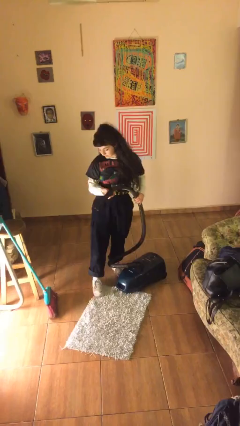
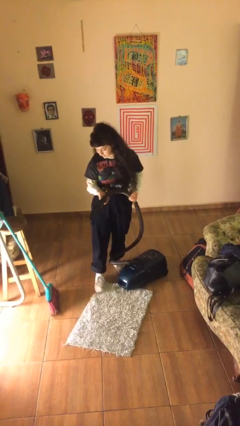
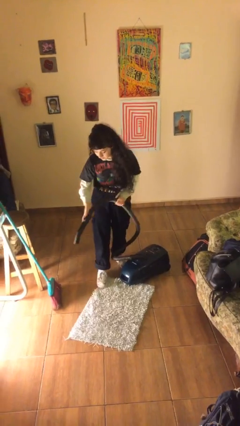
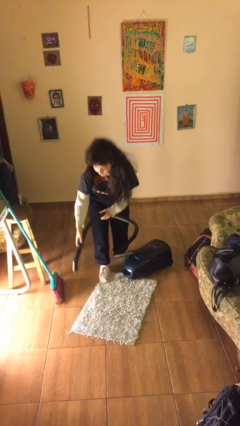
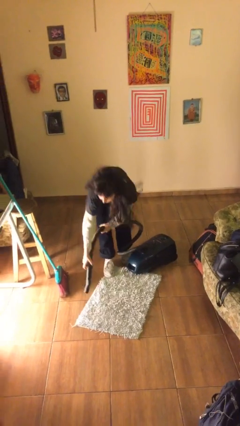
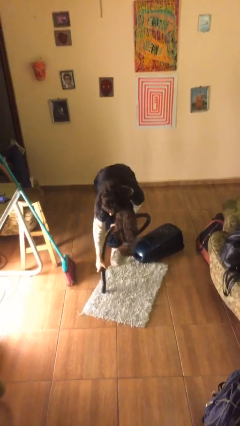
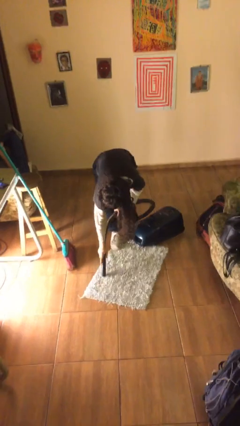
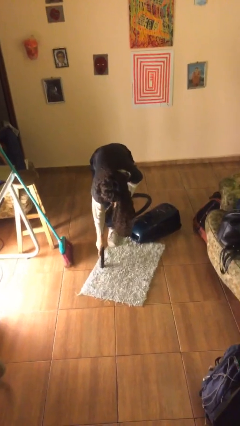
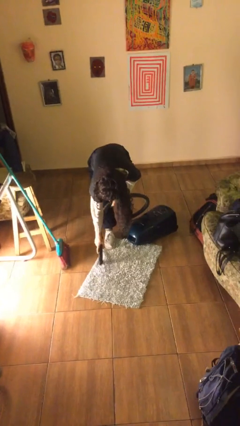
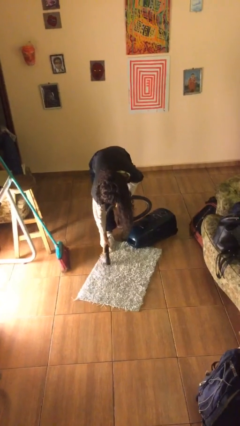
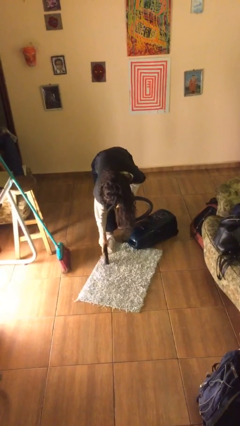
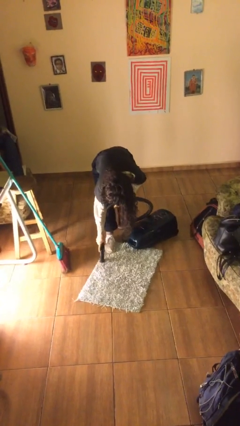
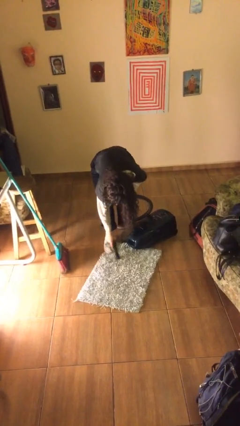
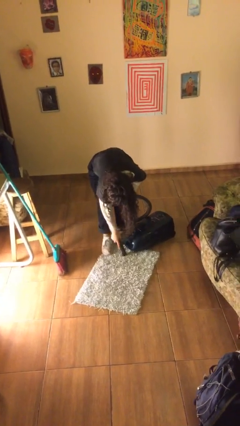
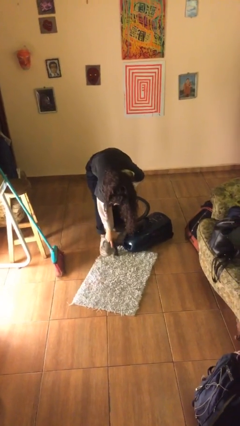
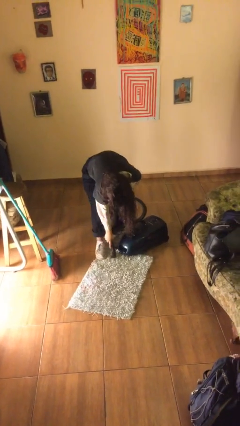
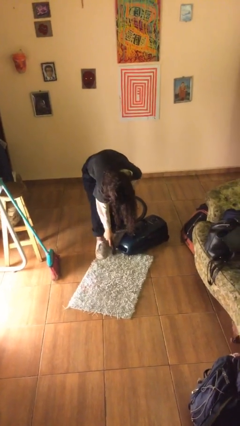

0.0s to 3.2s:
person vacuums carpet

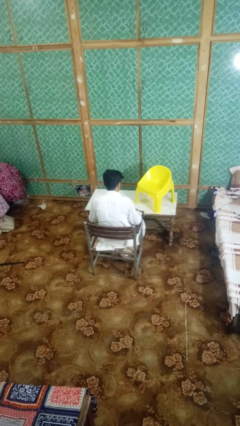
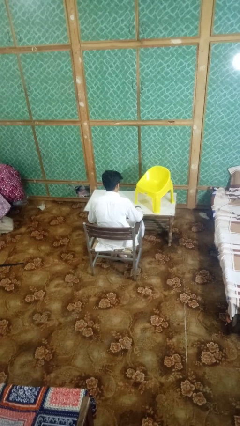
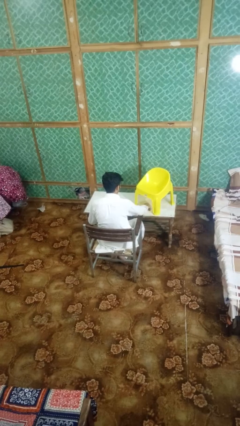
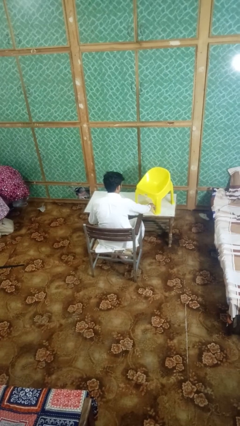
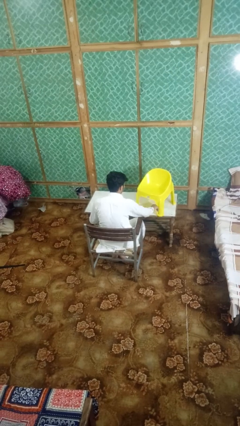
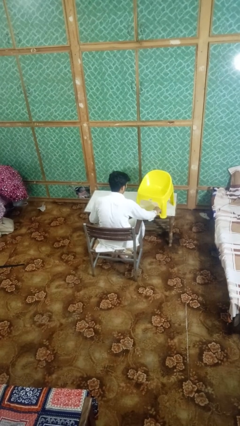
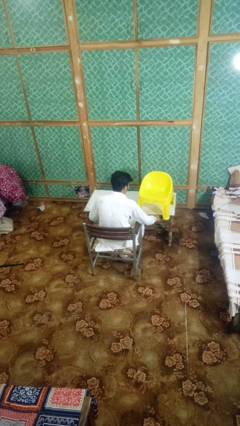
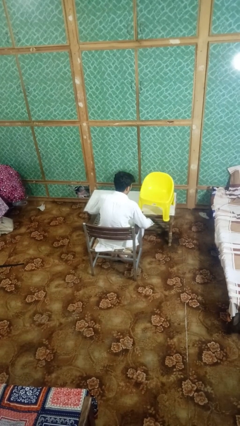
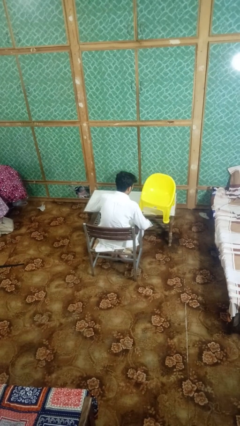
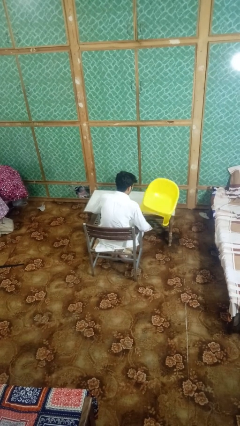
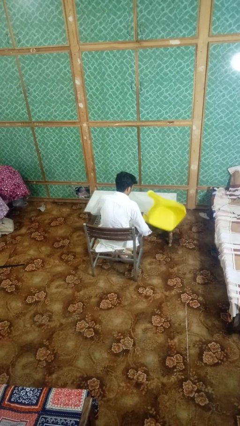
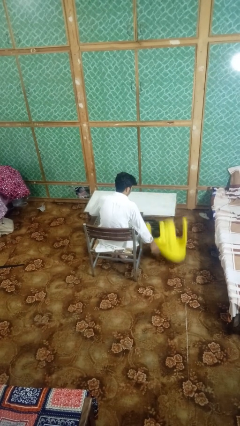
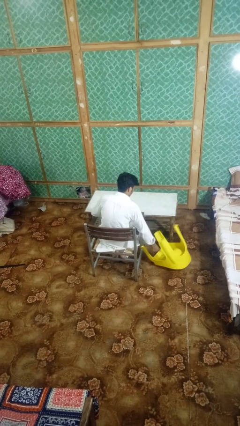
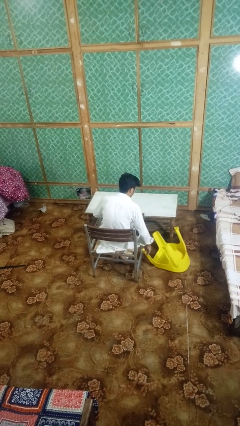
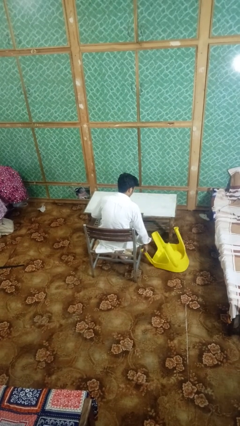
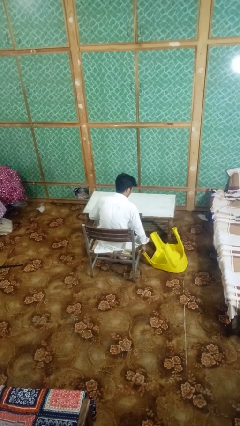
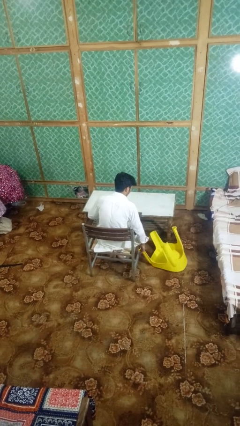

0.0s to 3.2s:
person knocks over furniture

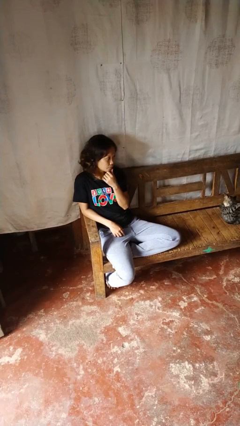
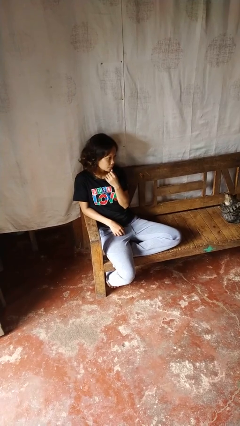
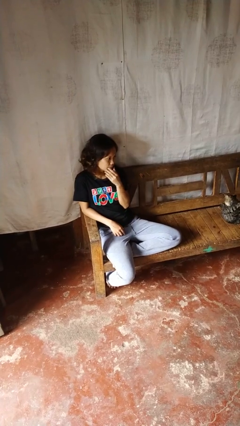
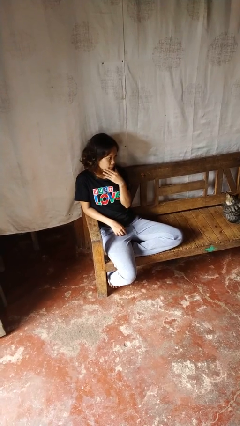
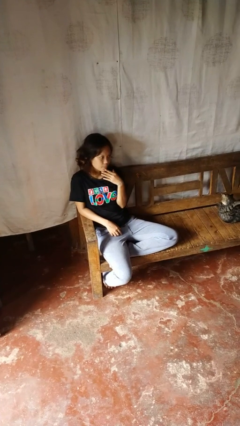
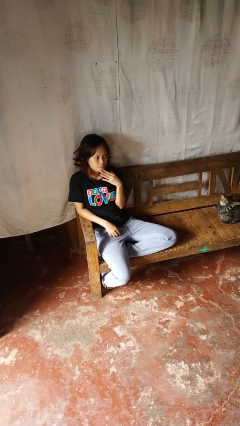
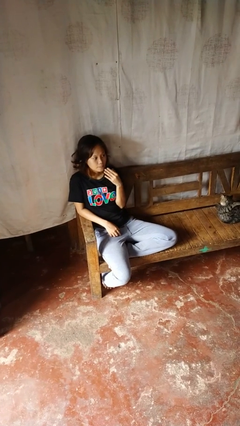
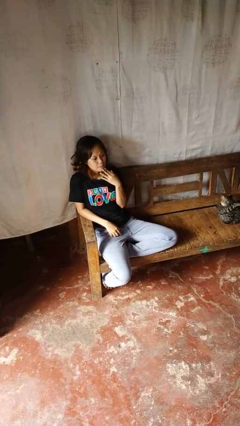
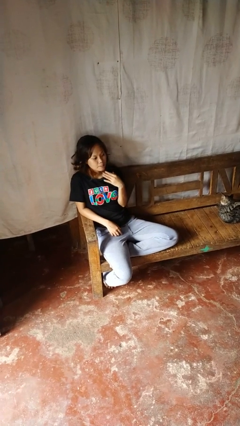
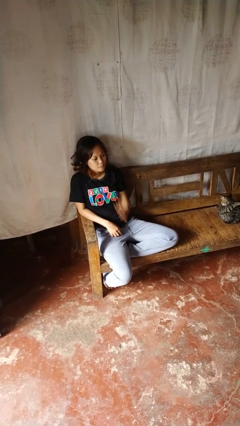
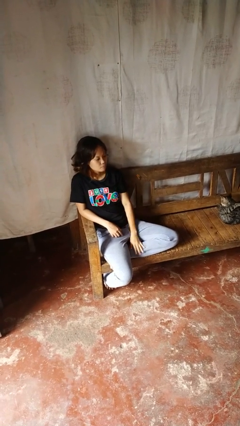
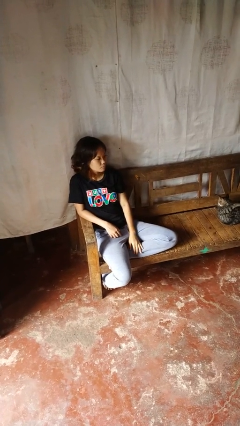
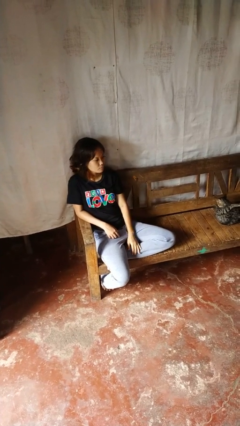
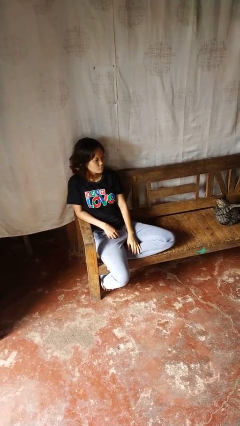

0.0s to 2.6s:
person strokes chin

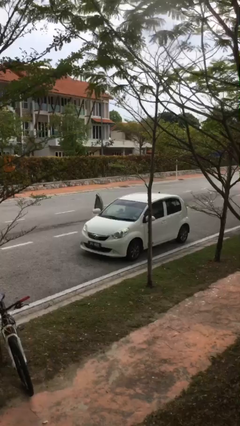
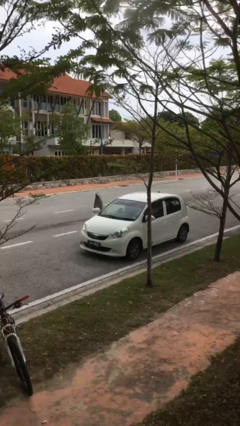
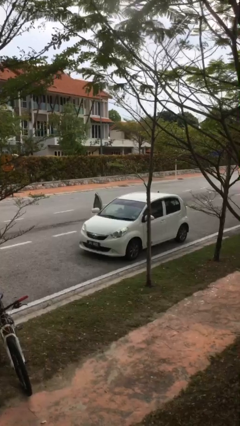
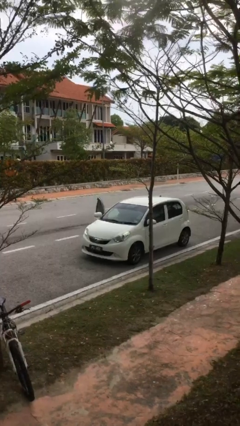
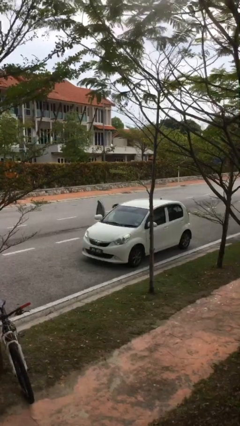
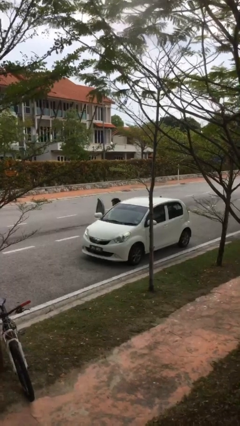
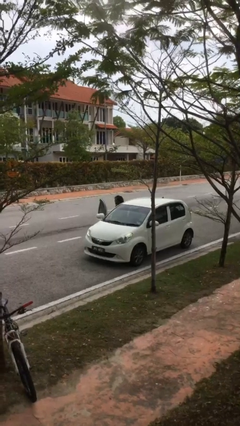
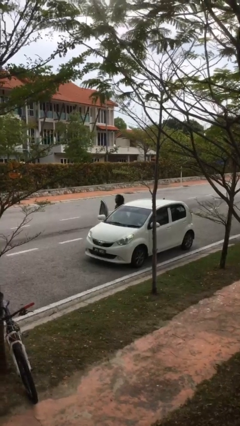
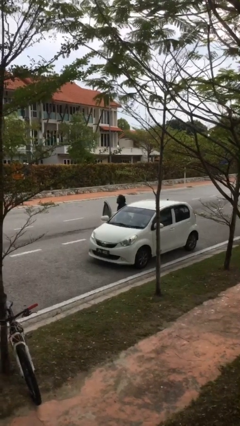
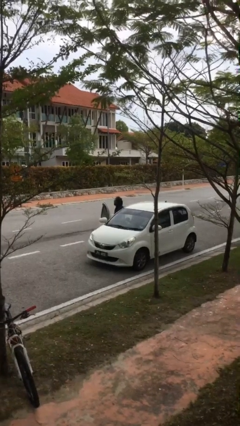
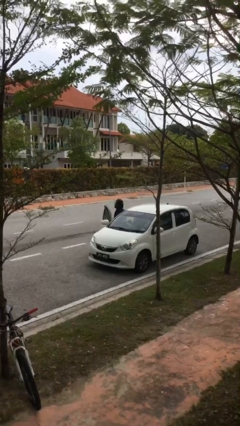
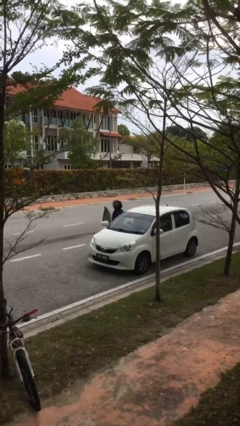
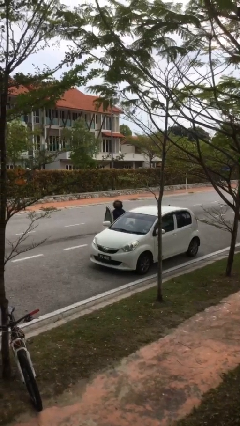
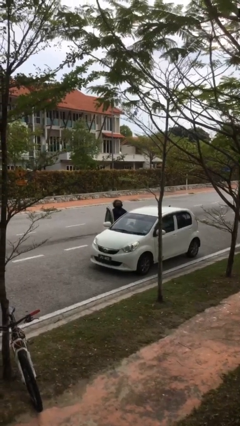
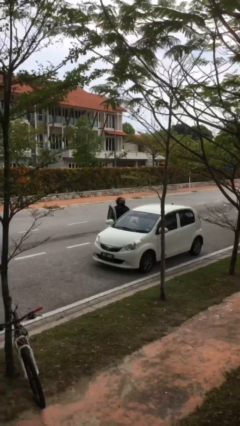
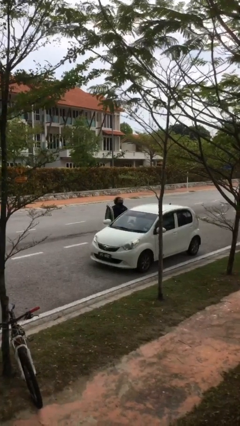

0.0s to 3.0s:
person exits car

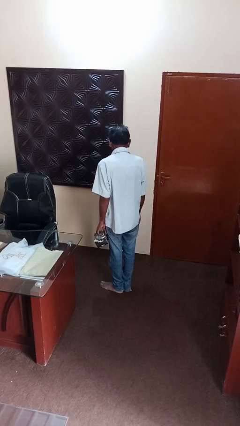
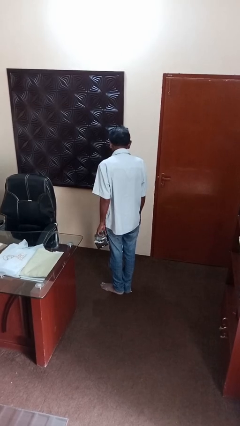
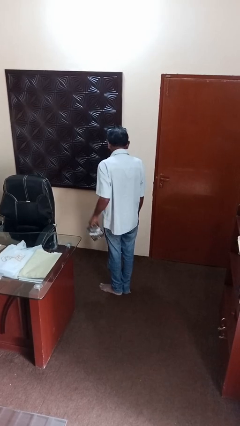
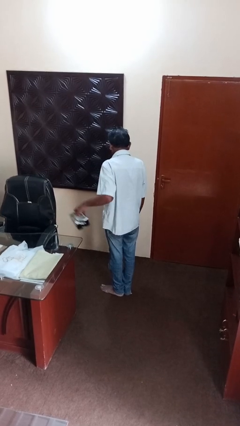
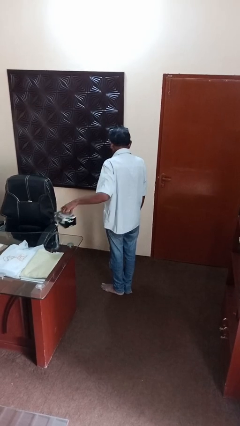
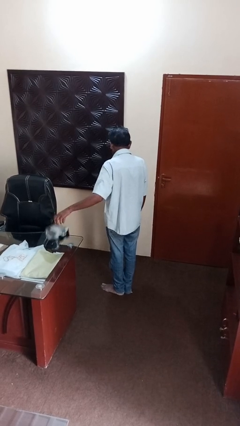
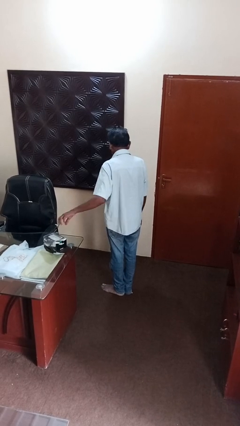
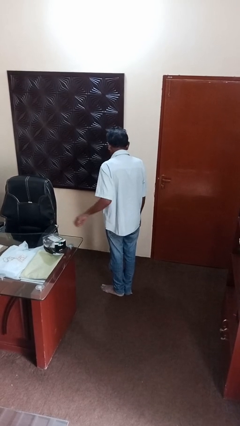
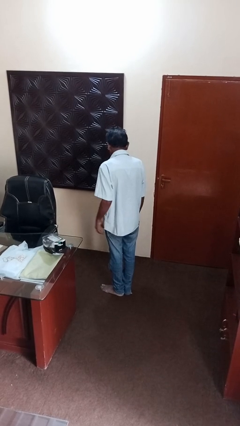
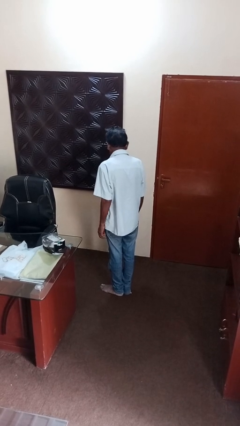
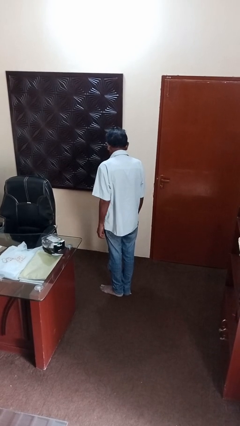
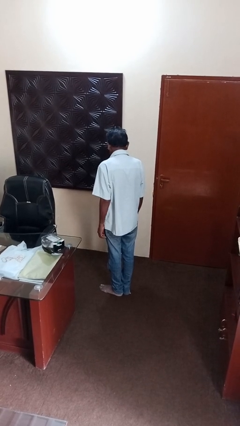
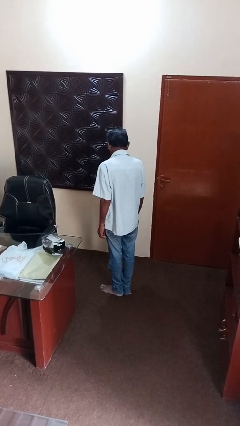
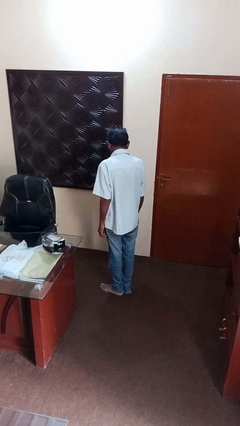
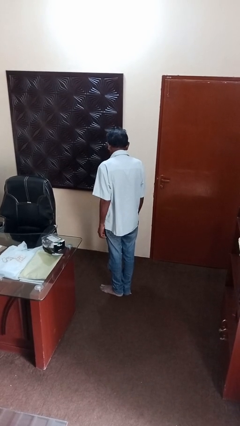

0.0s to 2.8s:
person throws object on table

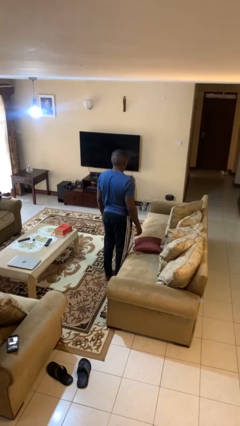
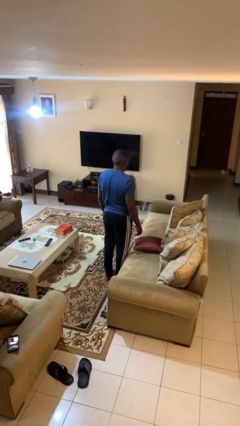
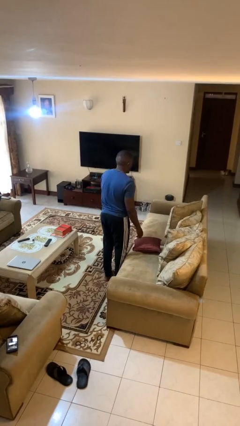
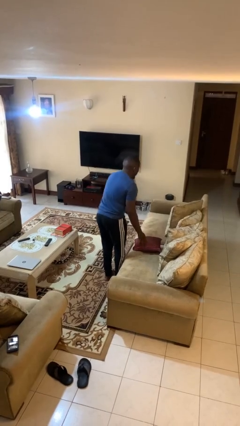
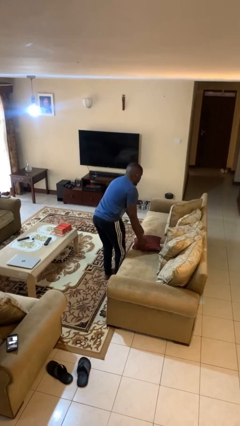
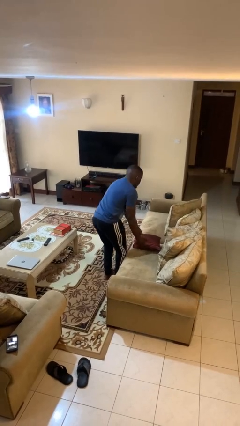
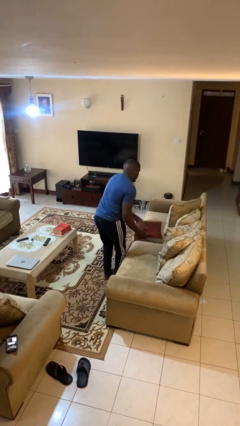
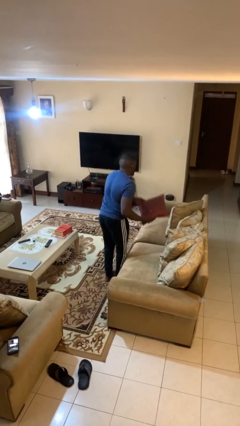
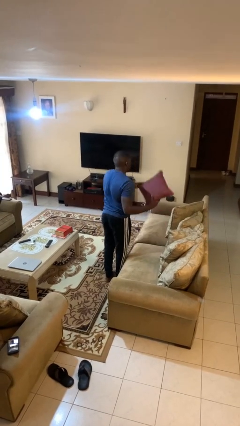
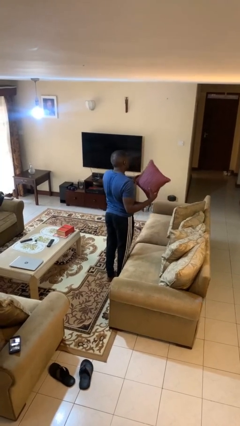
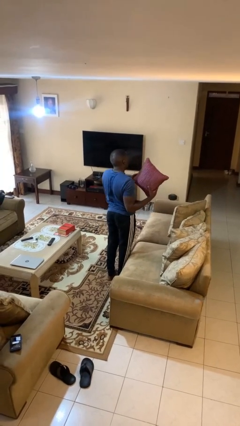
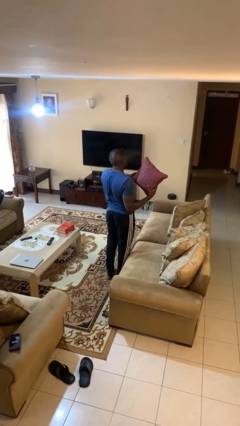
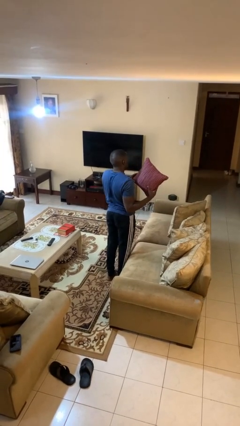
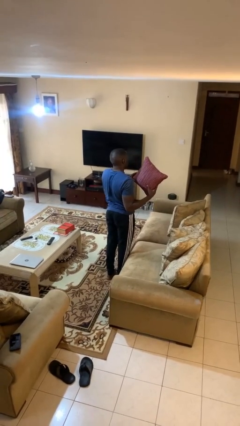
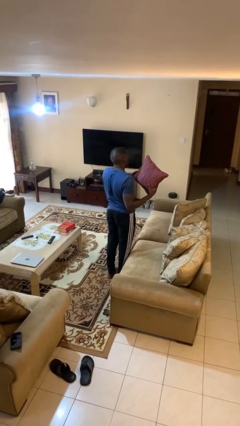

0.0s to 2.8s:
person picks up object from couch
